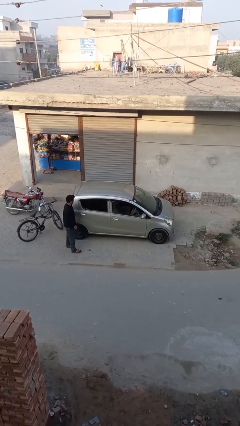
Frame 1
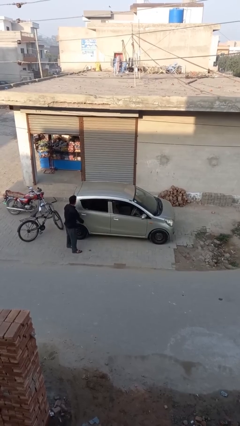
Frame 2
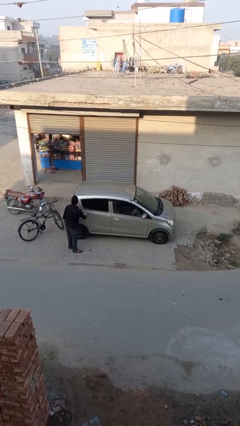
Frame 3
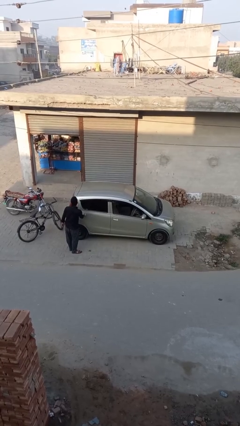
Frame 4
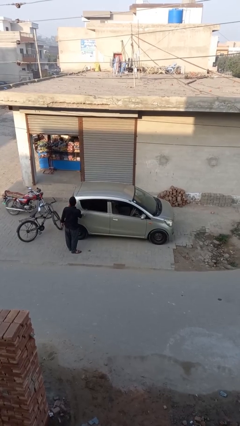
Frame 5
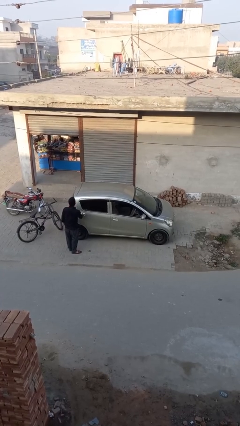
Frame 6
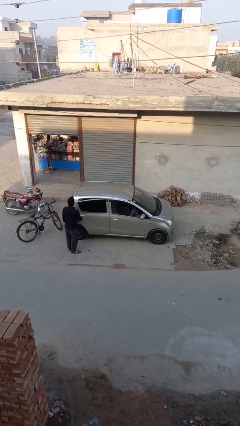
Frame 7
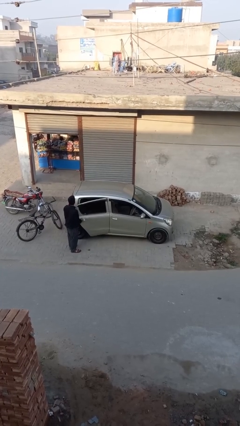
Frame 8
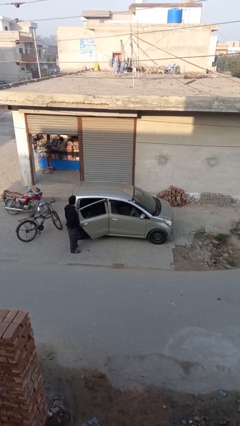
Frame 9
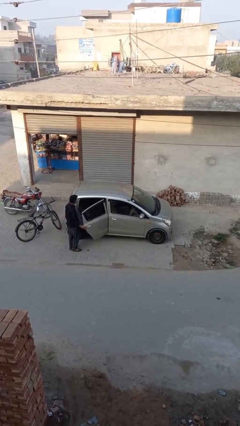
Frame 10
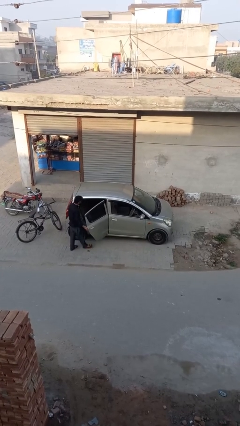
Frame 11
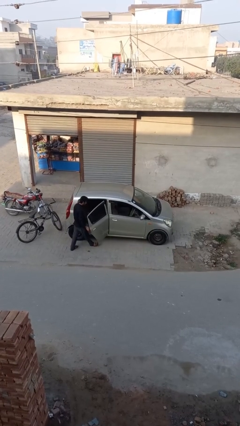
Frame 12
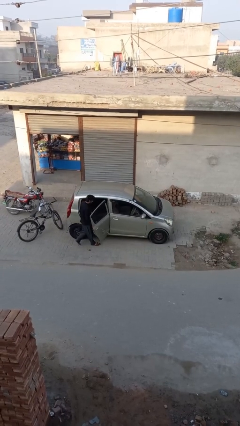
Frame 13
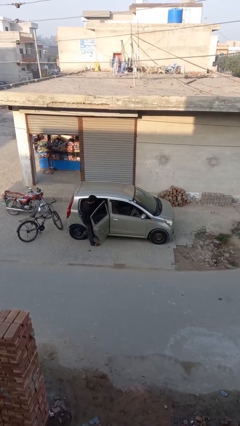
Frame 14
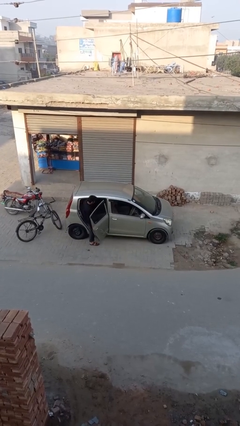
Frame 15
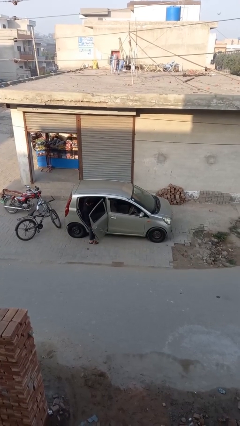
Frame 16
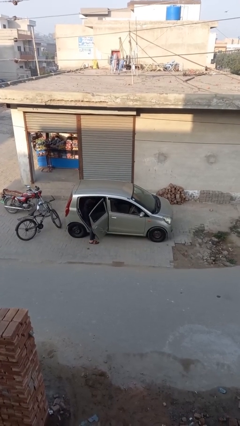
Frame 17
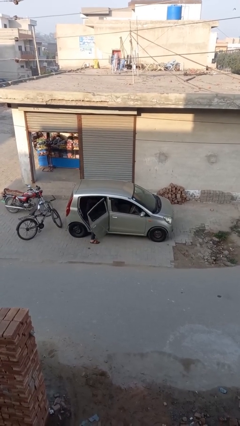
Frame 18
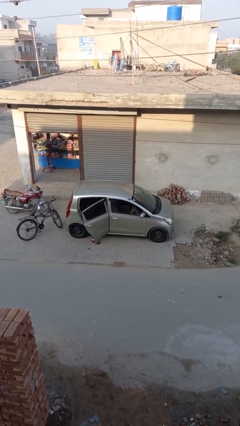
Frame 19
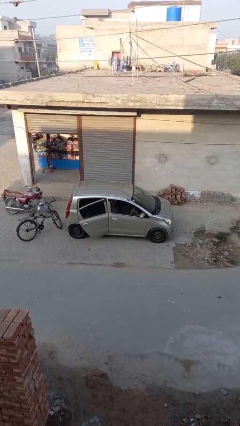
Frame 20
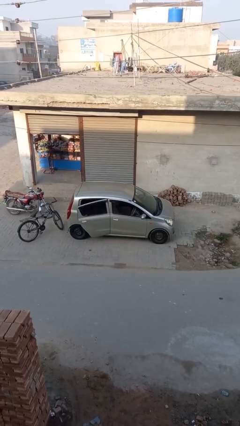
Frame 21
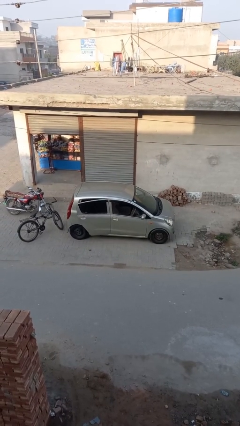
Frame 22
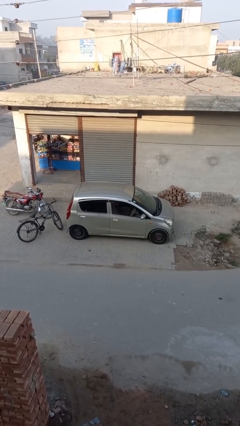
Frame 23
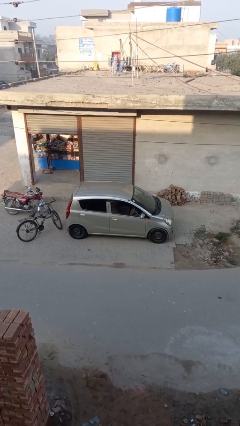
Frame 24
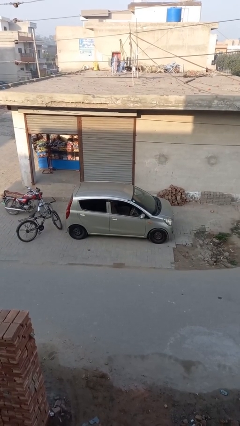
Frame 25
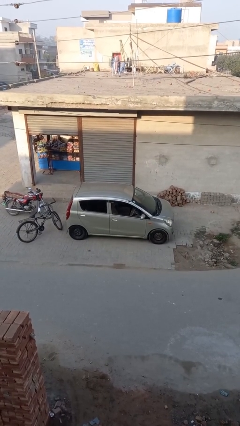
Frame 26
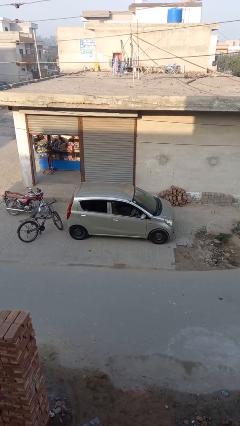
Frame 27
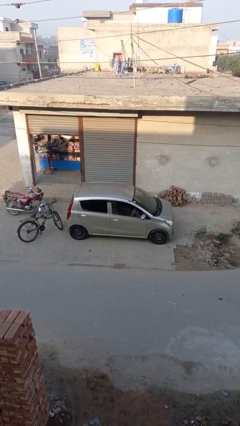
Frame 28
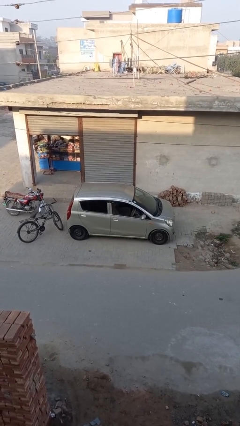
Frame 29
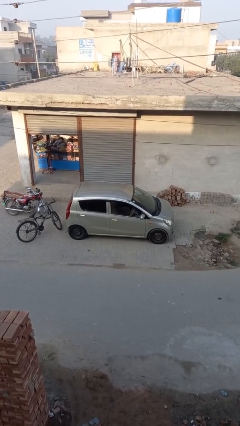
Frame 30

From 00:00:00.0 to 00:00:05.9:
car picks up person

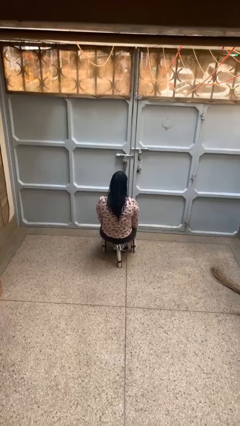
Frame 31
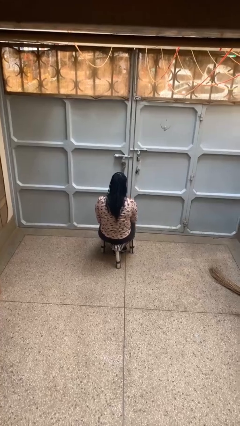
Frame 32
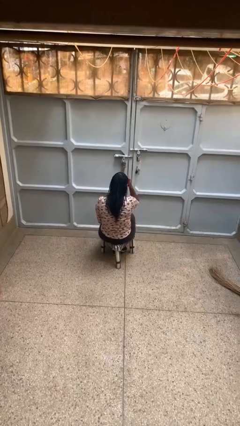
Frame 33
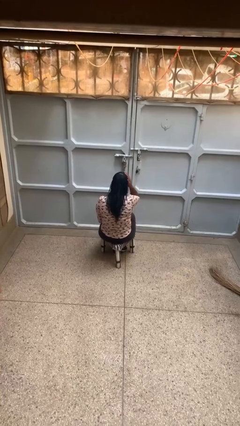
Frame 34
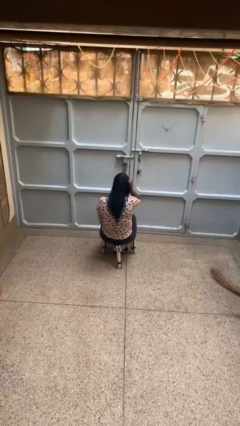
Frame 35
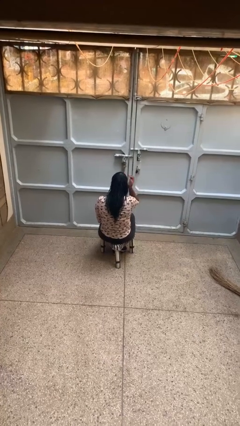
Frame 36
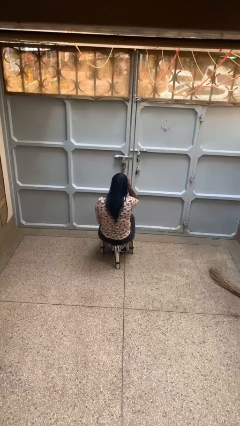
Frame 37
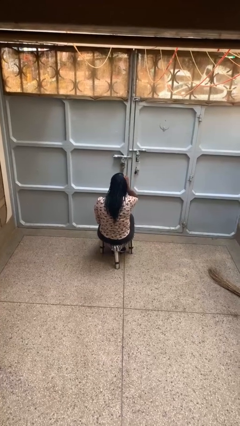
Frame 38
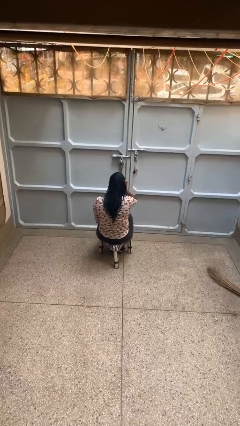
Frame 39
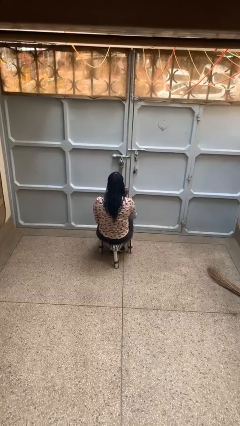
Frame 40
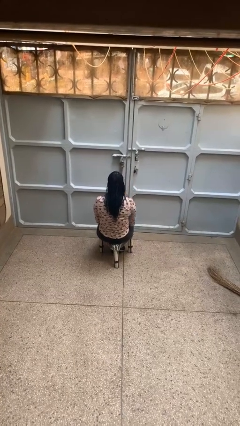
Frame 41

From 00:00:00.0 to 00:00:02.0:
person strokes hair

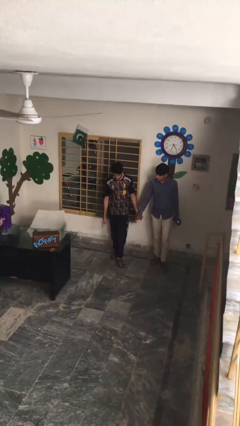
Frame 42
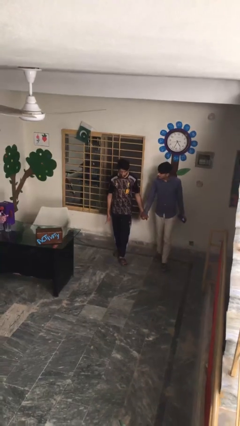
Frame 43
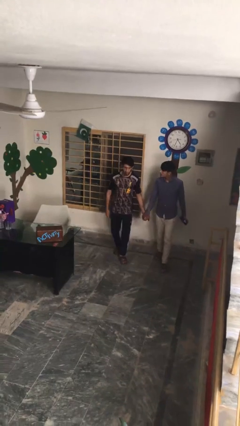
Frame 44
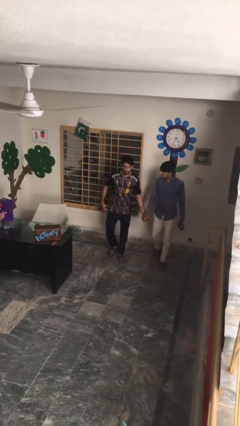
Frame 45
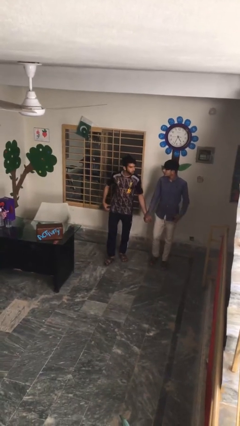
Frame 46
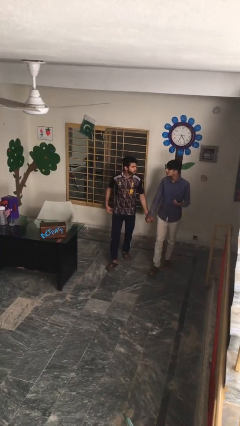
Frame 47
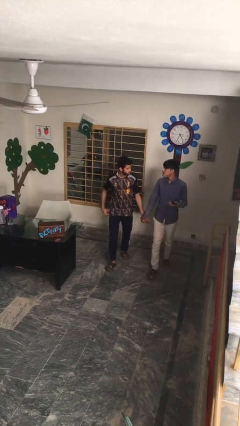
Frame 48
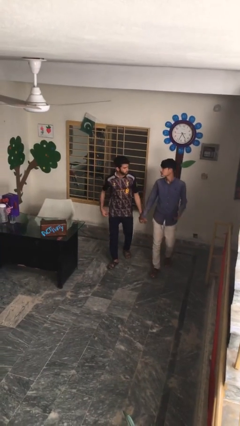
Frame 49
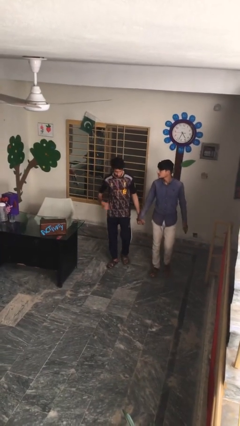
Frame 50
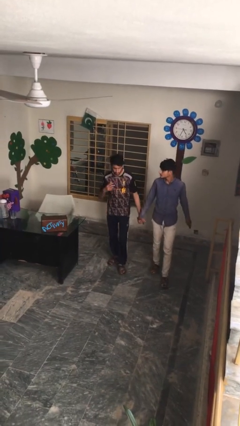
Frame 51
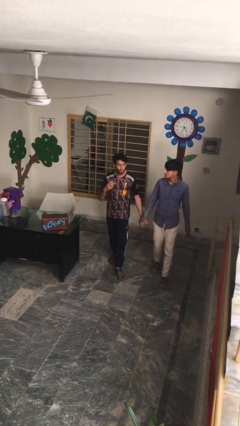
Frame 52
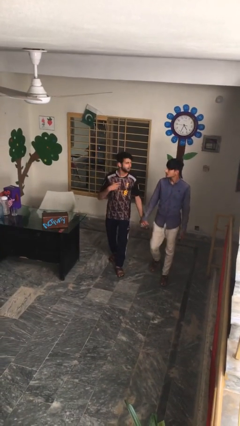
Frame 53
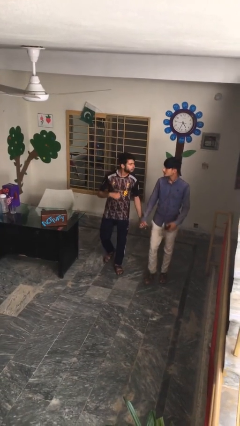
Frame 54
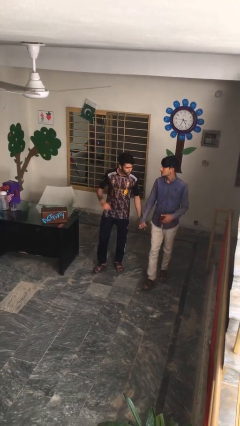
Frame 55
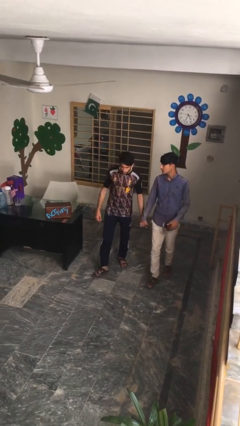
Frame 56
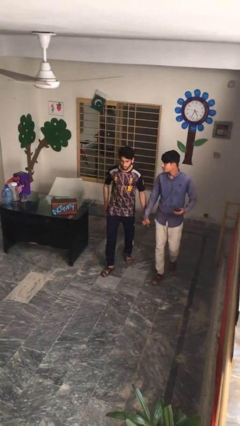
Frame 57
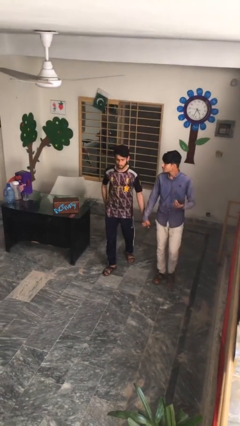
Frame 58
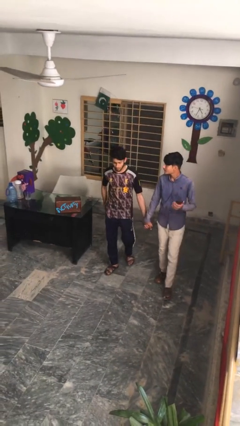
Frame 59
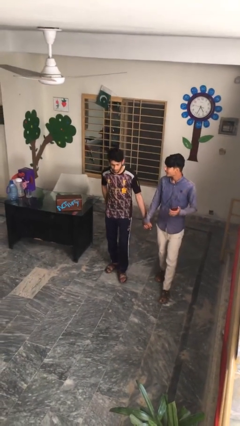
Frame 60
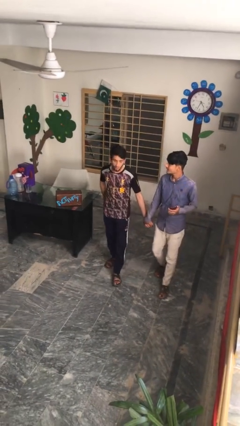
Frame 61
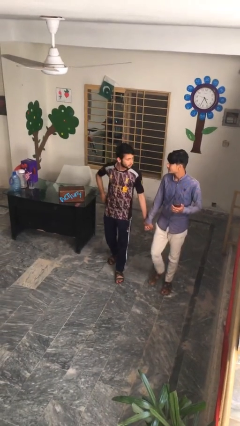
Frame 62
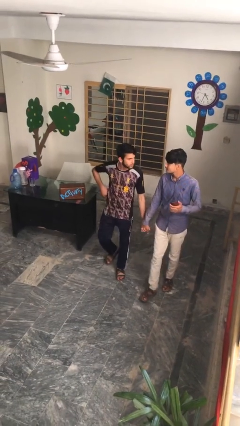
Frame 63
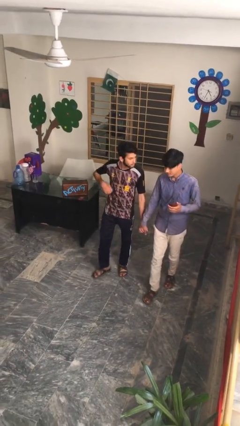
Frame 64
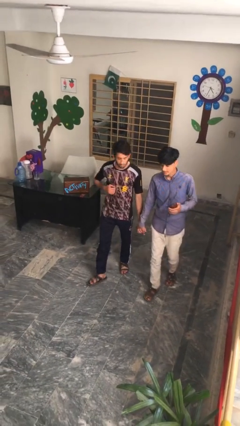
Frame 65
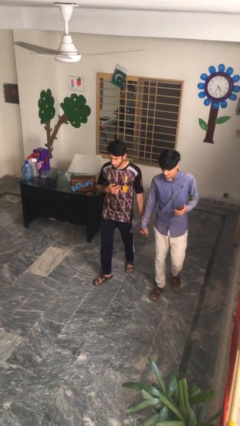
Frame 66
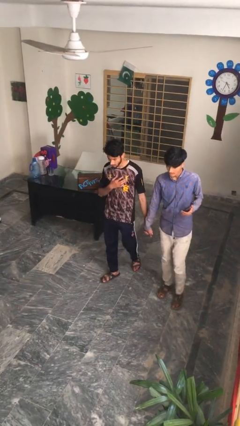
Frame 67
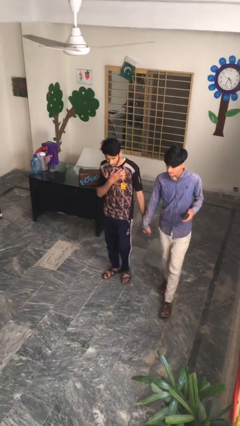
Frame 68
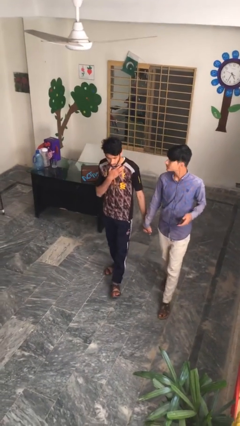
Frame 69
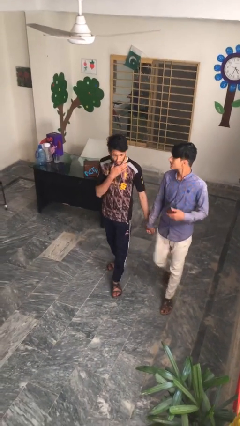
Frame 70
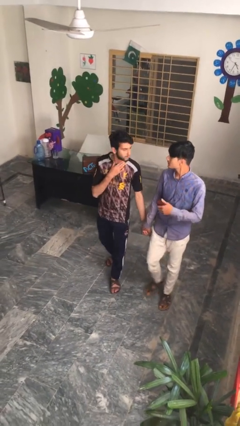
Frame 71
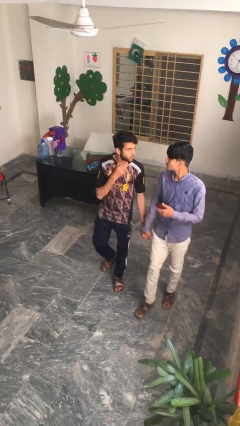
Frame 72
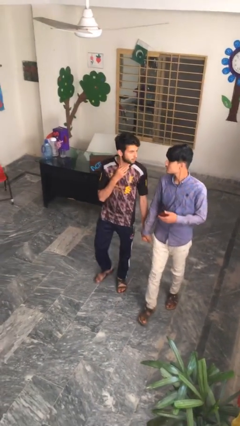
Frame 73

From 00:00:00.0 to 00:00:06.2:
person holds hand

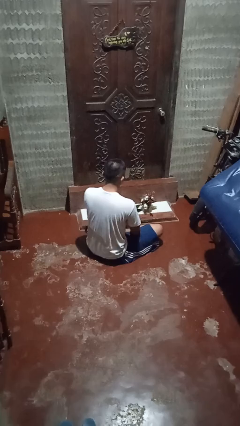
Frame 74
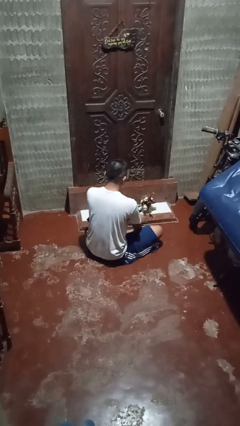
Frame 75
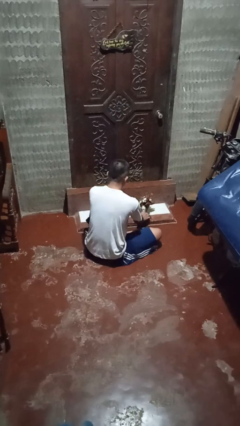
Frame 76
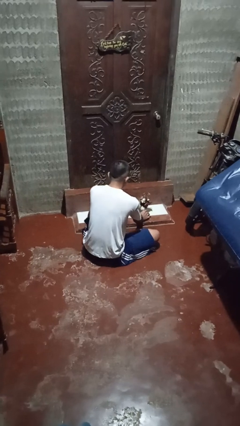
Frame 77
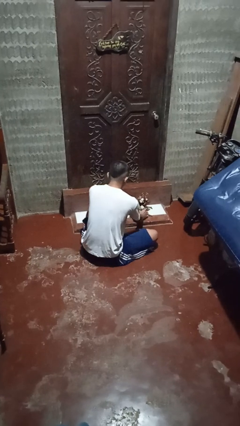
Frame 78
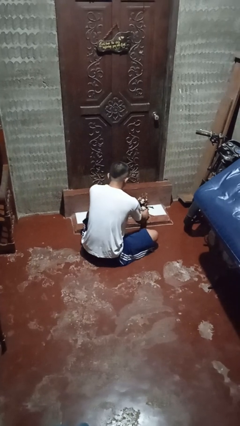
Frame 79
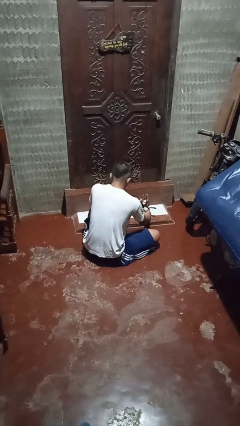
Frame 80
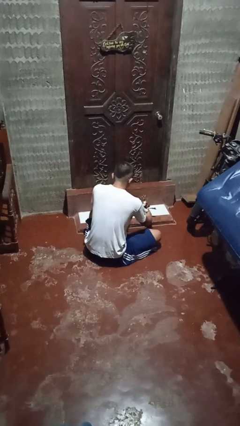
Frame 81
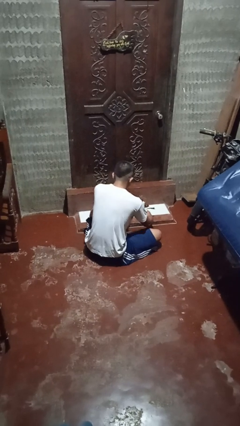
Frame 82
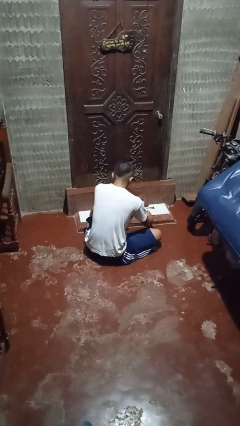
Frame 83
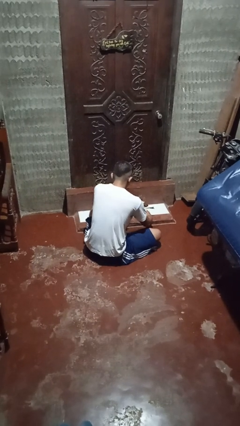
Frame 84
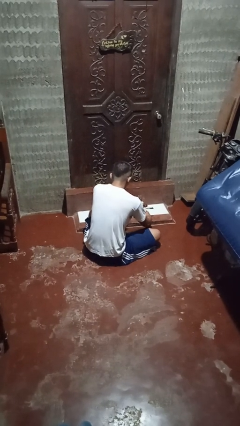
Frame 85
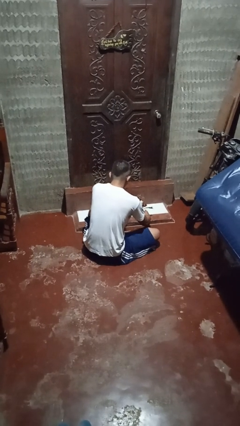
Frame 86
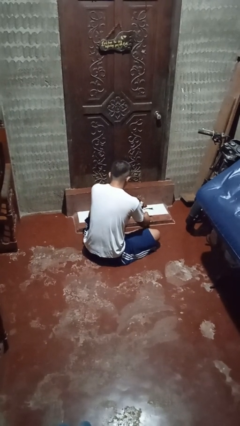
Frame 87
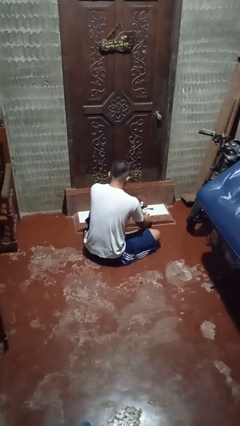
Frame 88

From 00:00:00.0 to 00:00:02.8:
person arranges flowers in vase

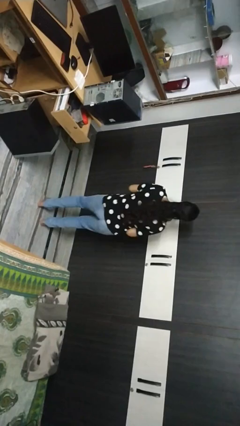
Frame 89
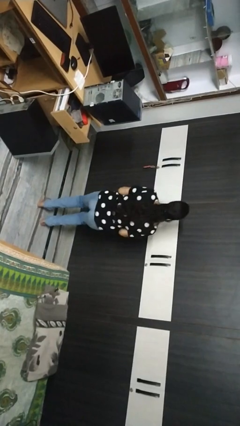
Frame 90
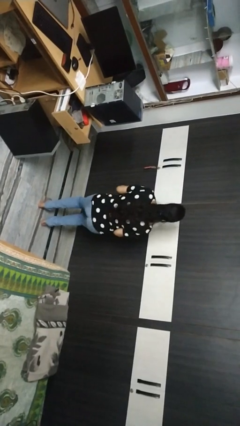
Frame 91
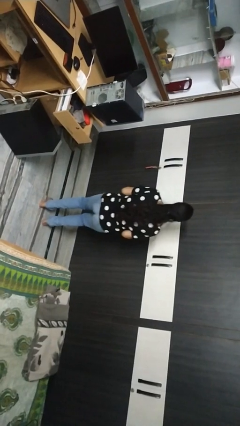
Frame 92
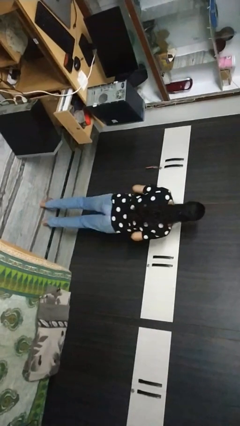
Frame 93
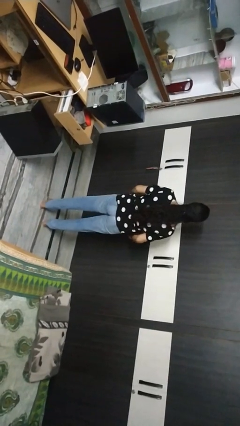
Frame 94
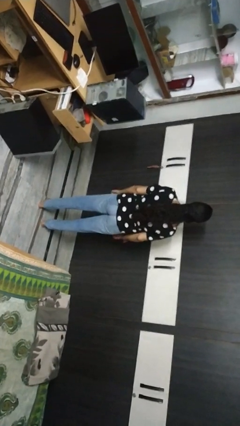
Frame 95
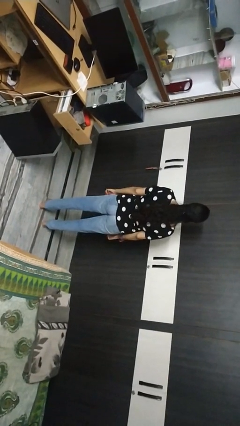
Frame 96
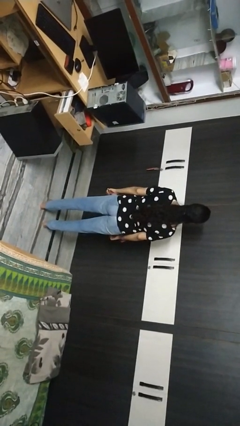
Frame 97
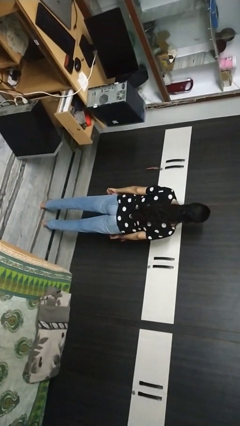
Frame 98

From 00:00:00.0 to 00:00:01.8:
person dances in place
